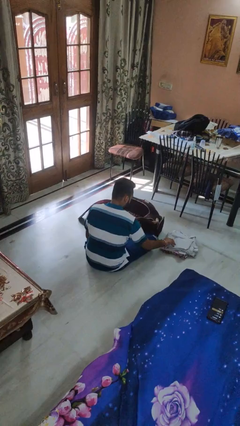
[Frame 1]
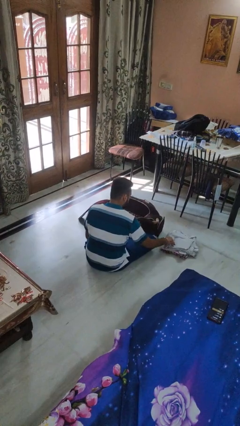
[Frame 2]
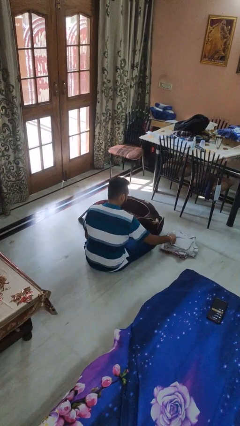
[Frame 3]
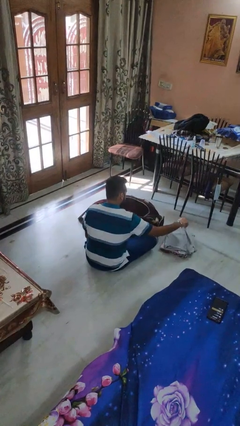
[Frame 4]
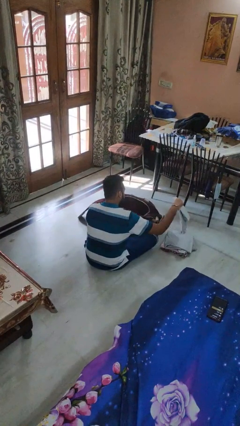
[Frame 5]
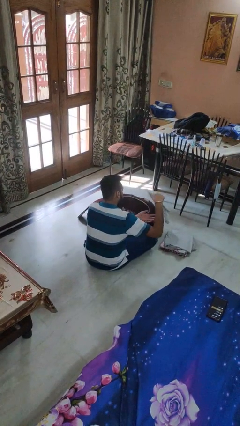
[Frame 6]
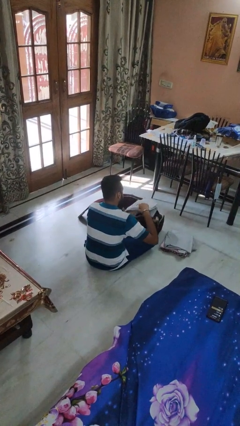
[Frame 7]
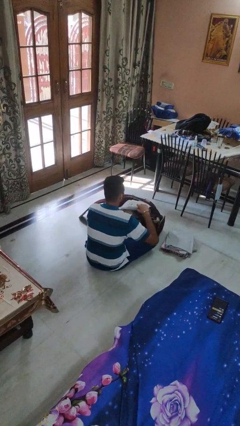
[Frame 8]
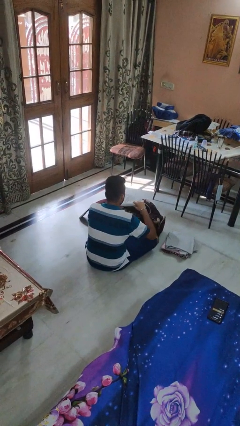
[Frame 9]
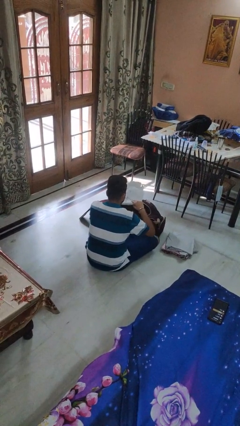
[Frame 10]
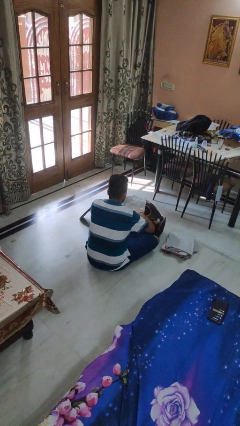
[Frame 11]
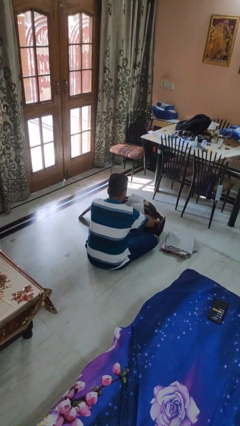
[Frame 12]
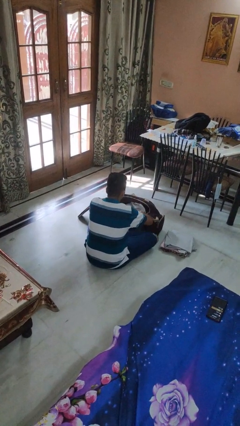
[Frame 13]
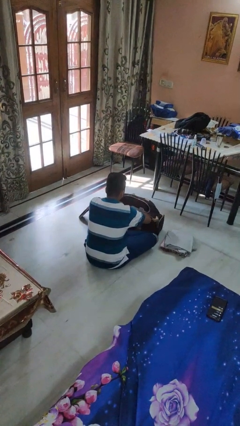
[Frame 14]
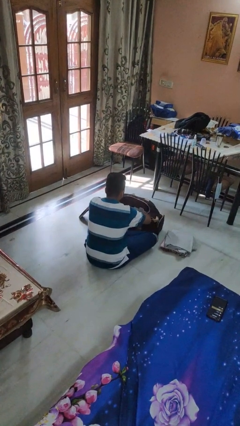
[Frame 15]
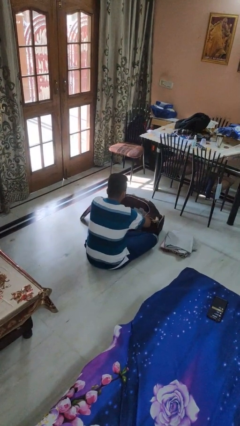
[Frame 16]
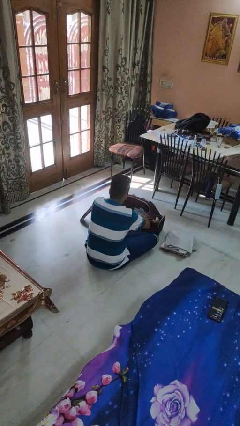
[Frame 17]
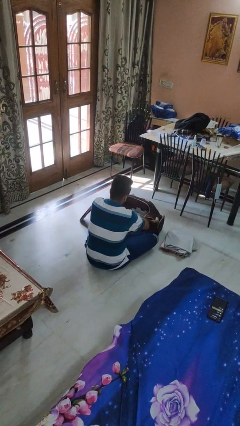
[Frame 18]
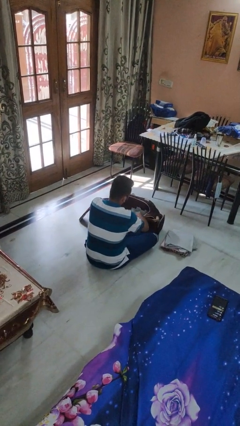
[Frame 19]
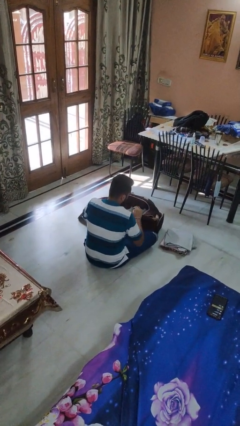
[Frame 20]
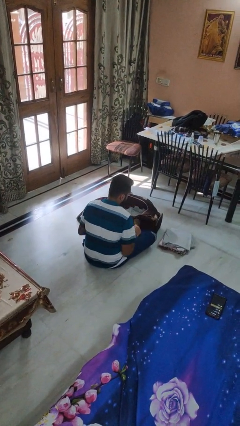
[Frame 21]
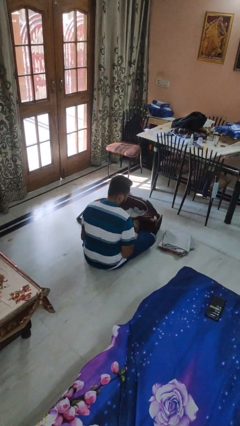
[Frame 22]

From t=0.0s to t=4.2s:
person loads clothes into suitcase

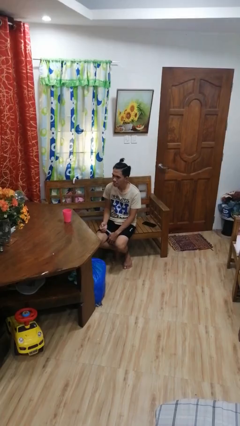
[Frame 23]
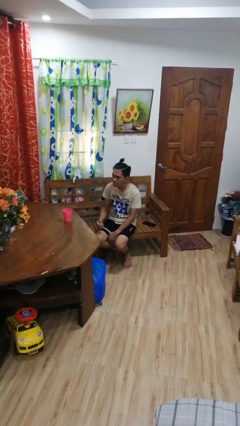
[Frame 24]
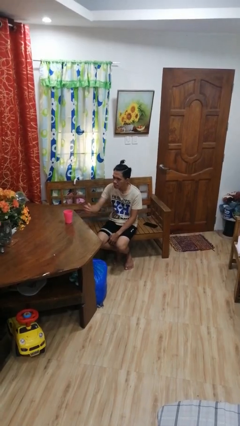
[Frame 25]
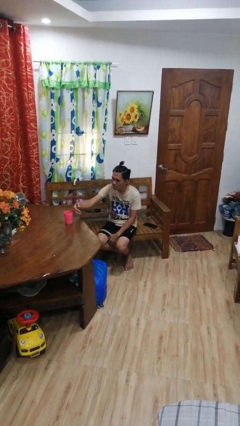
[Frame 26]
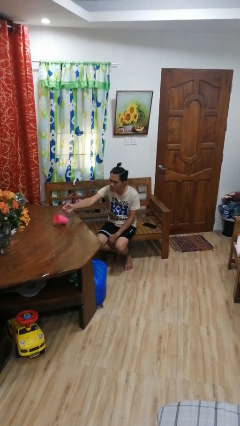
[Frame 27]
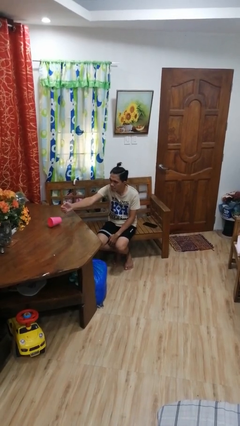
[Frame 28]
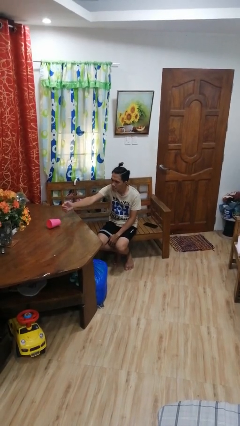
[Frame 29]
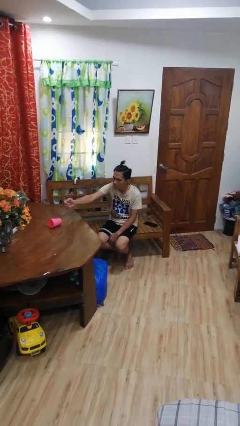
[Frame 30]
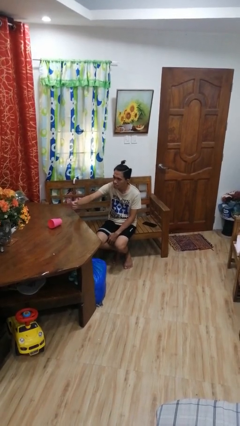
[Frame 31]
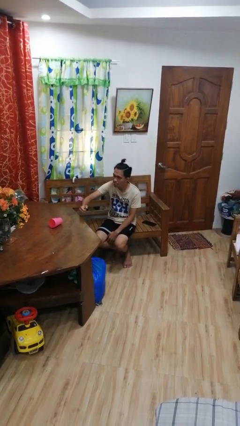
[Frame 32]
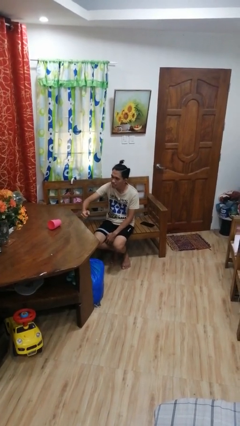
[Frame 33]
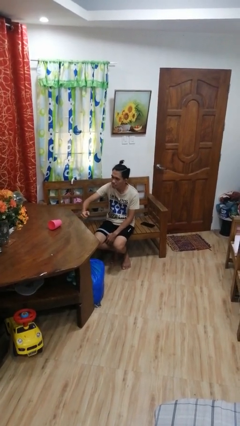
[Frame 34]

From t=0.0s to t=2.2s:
person knocks over glass

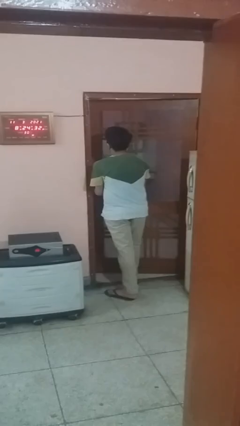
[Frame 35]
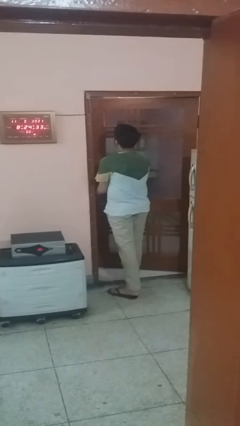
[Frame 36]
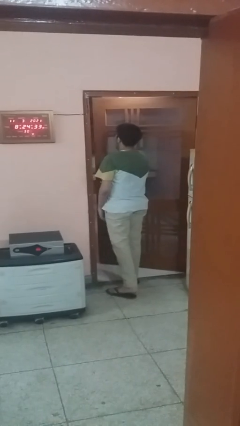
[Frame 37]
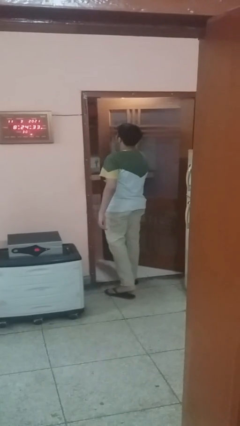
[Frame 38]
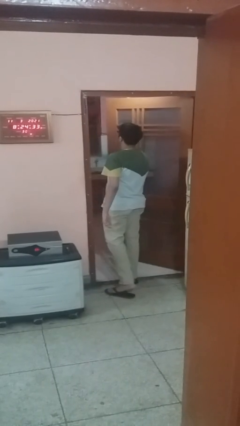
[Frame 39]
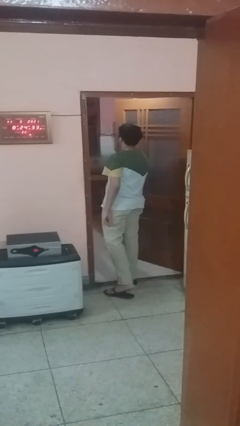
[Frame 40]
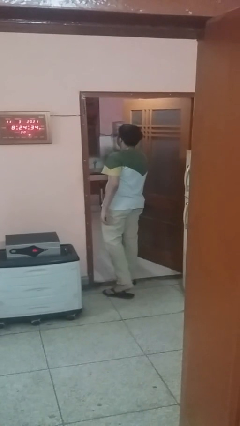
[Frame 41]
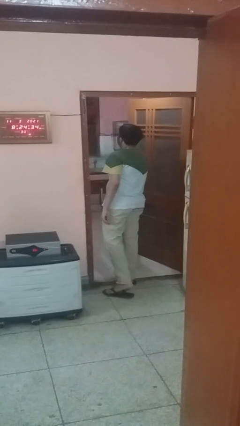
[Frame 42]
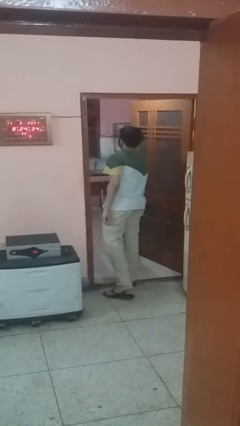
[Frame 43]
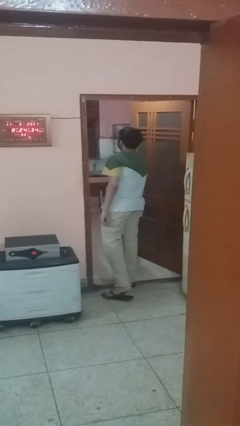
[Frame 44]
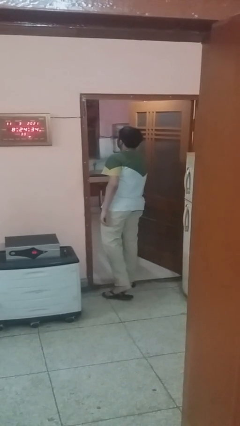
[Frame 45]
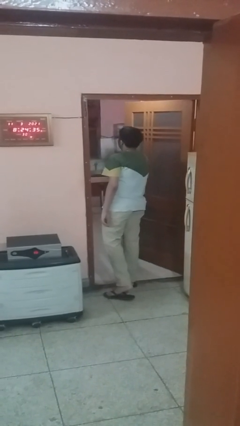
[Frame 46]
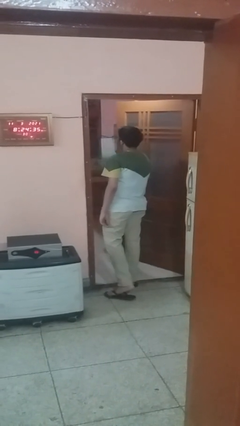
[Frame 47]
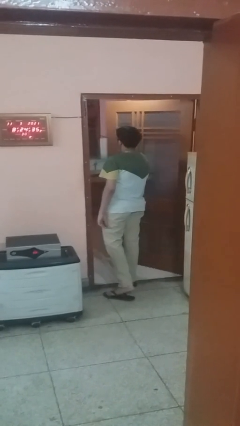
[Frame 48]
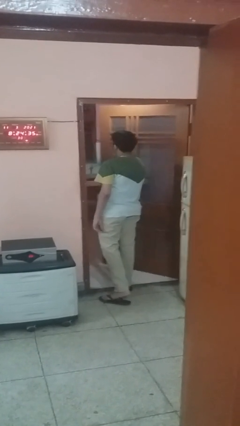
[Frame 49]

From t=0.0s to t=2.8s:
person opens facility door

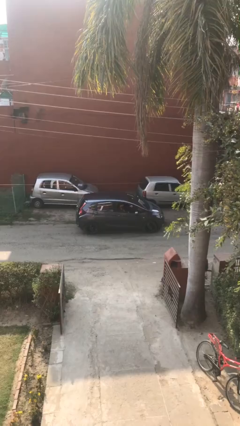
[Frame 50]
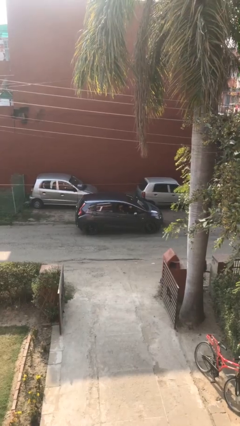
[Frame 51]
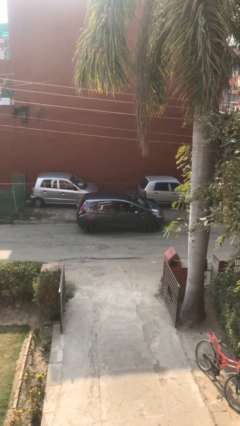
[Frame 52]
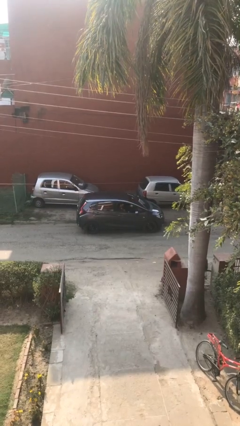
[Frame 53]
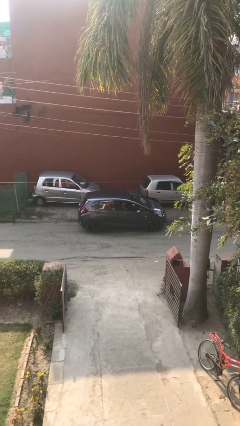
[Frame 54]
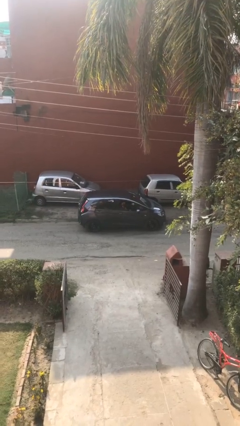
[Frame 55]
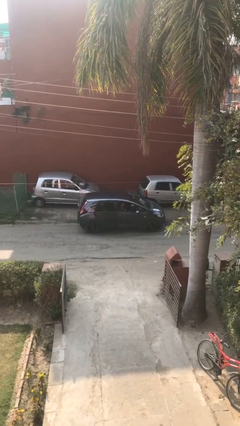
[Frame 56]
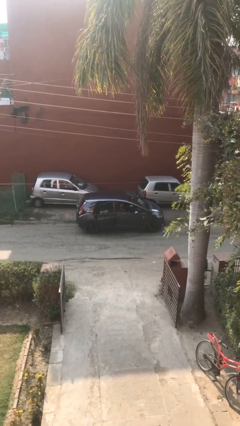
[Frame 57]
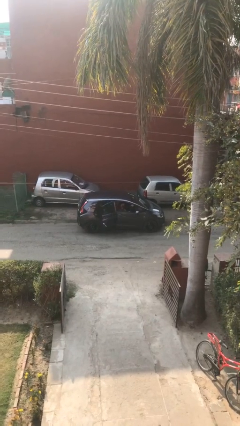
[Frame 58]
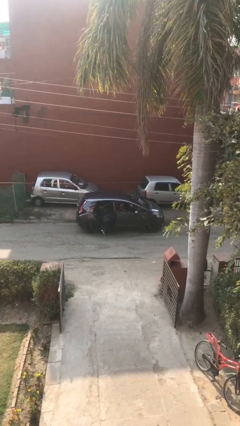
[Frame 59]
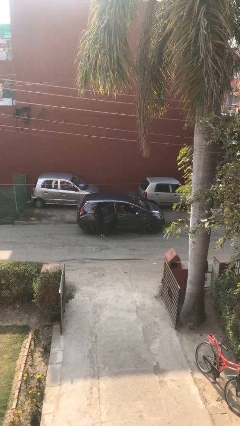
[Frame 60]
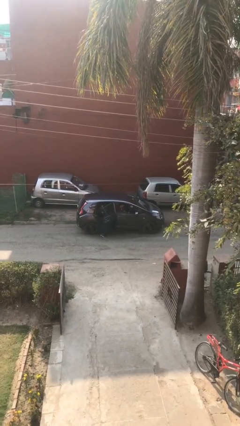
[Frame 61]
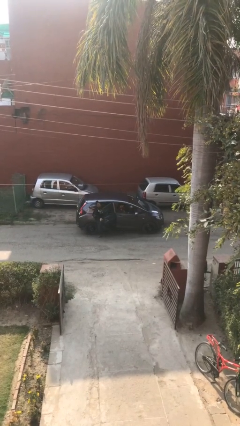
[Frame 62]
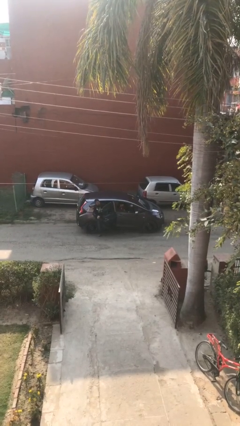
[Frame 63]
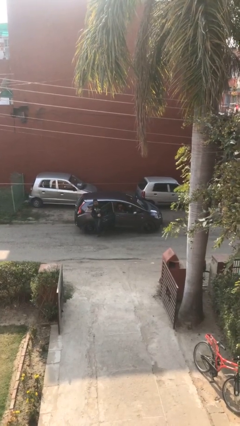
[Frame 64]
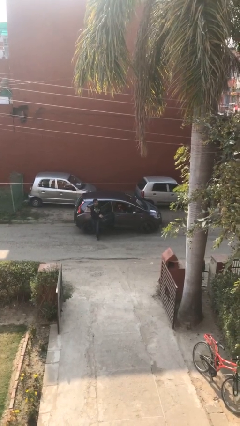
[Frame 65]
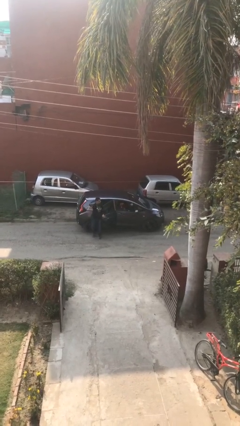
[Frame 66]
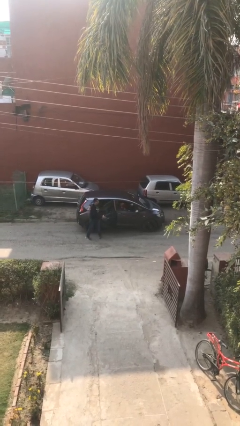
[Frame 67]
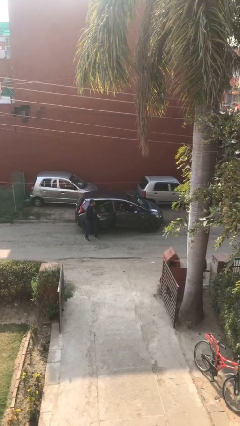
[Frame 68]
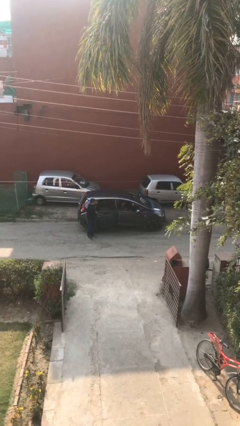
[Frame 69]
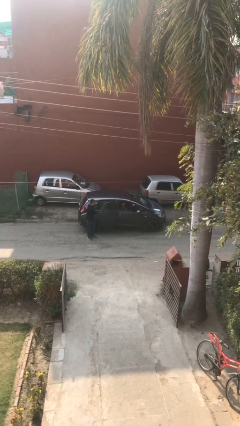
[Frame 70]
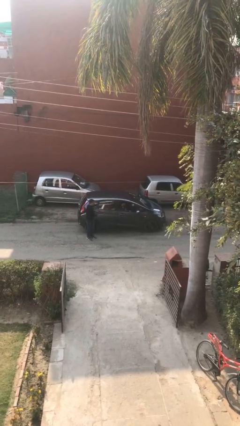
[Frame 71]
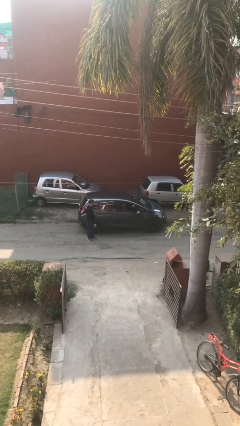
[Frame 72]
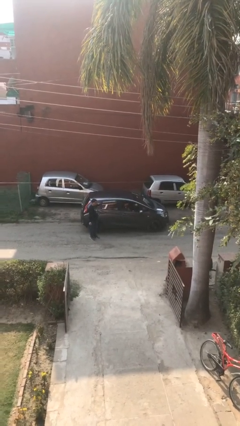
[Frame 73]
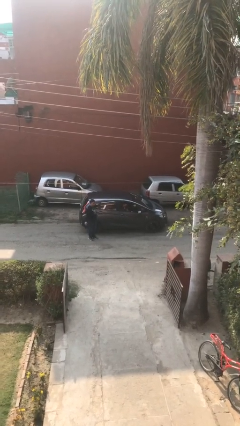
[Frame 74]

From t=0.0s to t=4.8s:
car drops off person

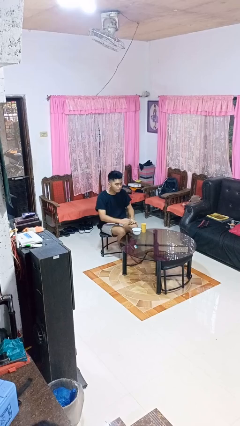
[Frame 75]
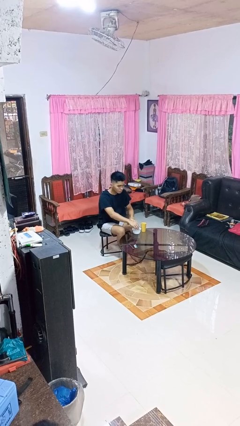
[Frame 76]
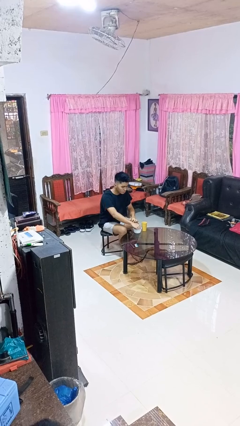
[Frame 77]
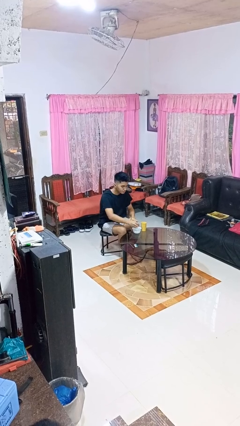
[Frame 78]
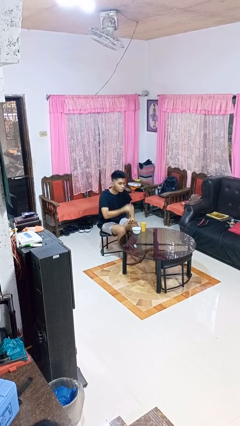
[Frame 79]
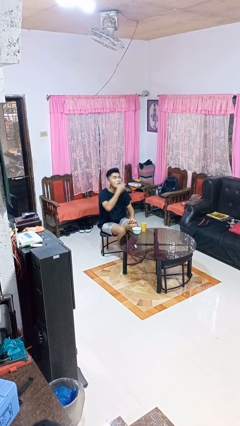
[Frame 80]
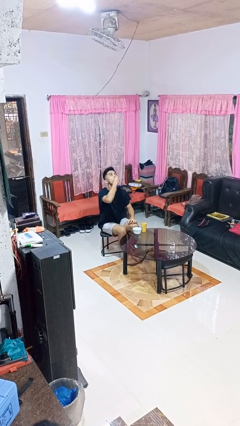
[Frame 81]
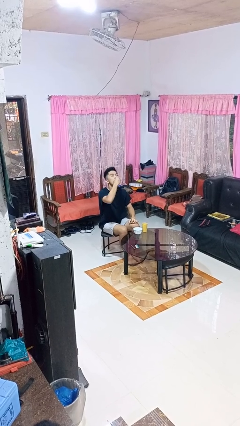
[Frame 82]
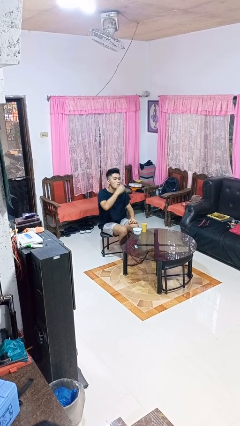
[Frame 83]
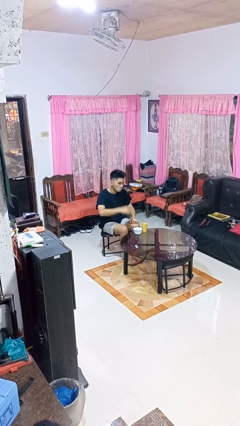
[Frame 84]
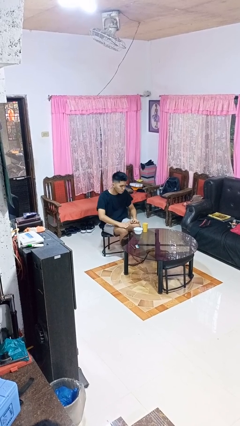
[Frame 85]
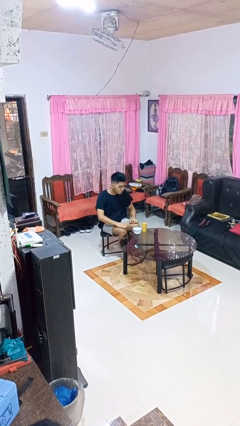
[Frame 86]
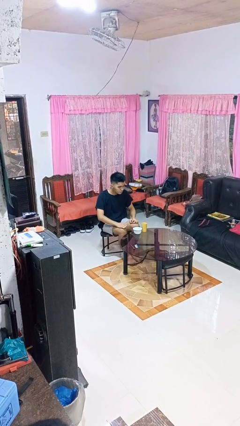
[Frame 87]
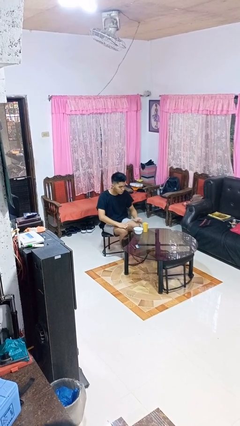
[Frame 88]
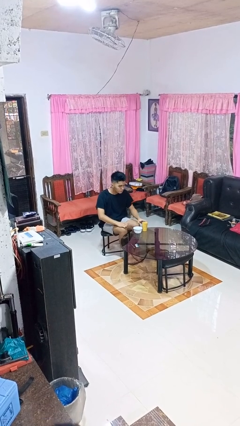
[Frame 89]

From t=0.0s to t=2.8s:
person takes medicine pills

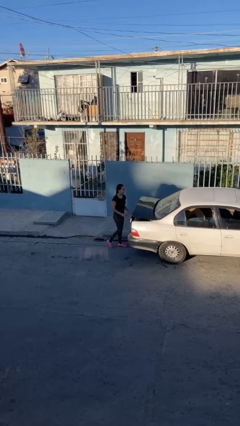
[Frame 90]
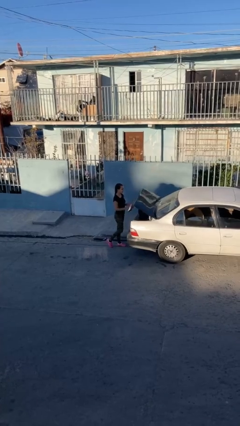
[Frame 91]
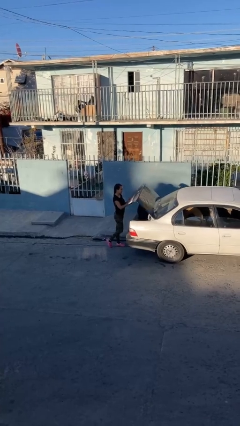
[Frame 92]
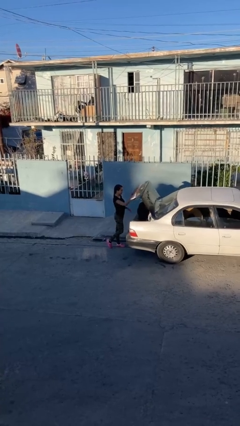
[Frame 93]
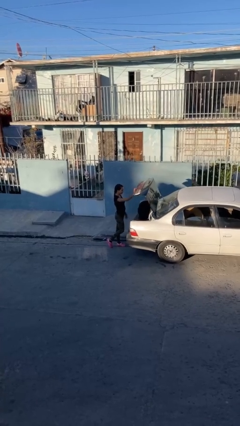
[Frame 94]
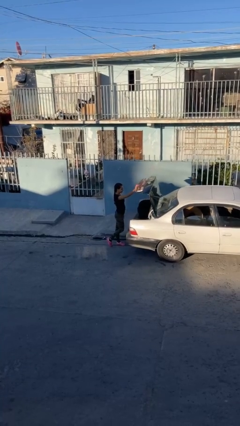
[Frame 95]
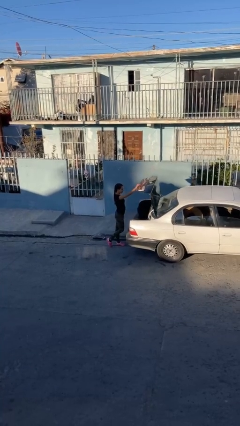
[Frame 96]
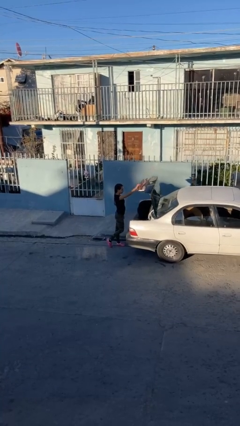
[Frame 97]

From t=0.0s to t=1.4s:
person opens car trunk
